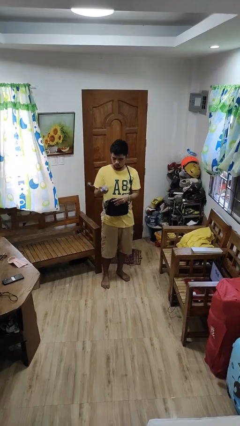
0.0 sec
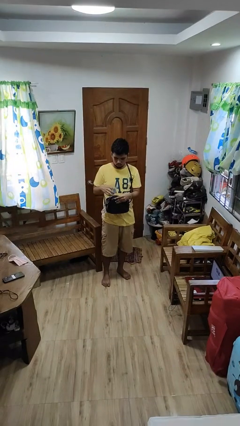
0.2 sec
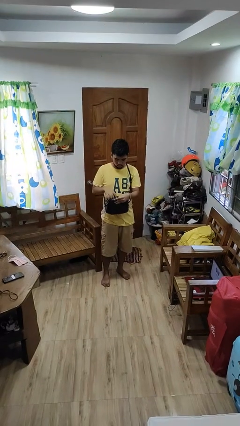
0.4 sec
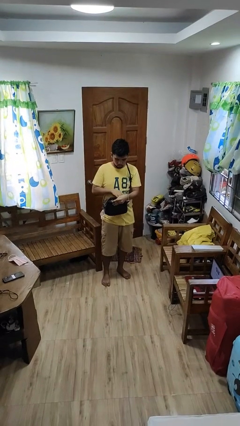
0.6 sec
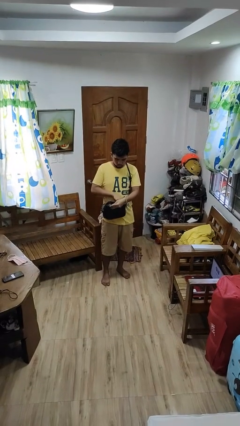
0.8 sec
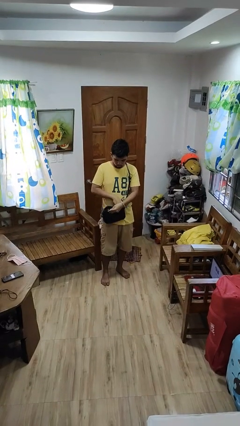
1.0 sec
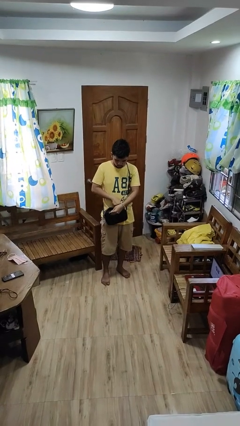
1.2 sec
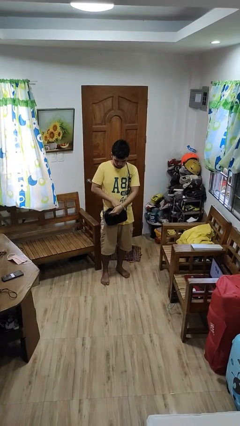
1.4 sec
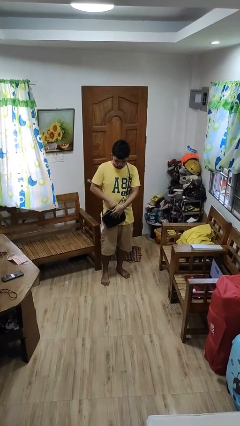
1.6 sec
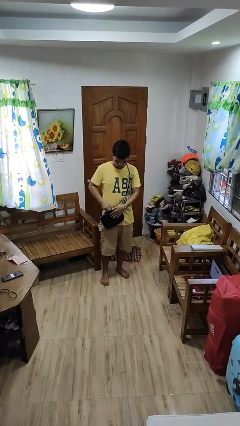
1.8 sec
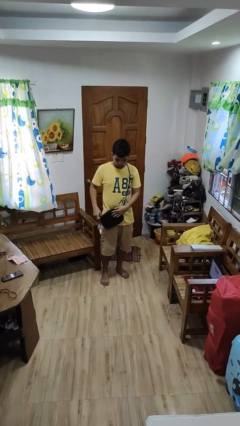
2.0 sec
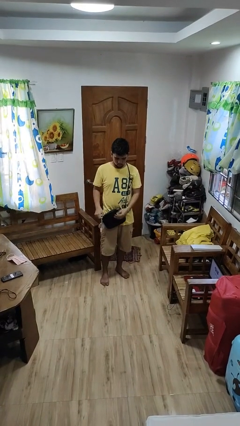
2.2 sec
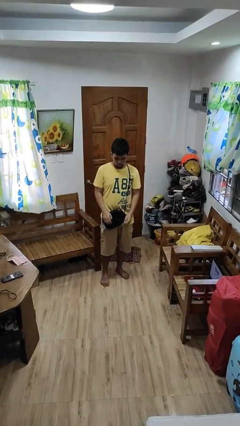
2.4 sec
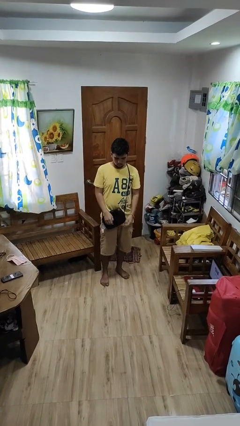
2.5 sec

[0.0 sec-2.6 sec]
person puts object into purse

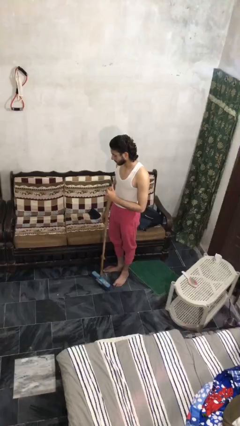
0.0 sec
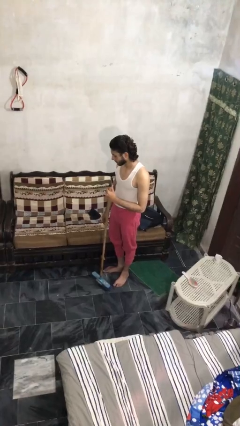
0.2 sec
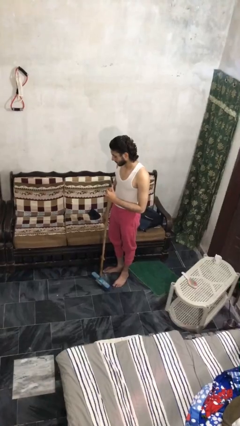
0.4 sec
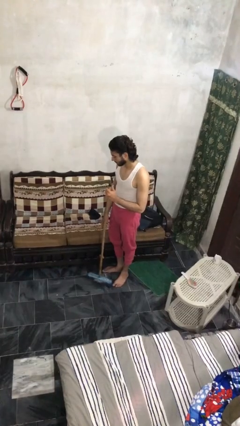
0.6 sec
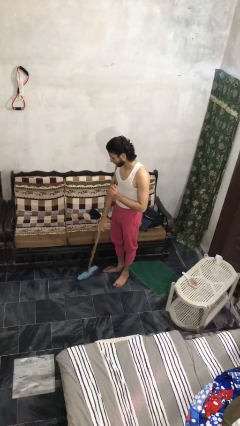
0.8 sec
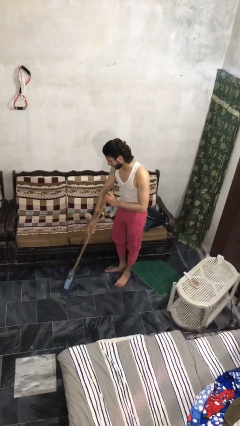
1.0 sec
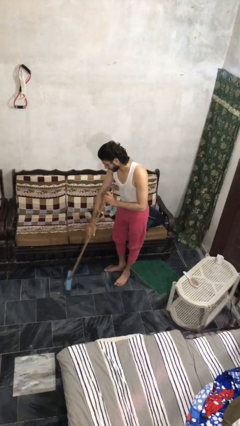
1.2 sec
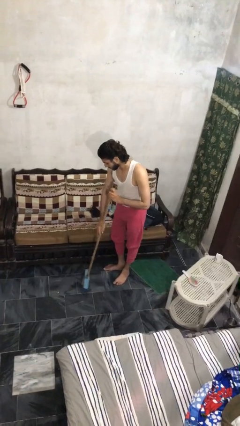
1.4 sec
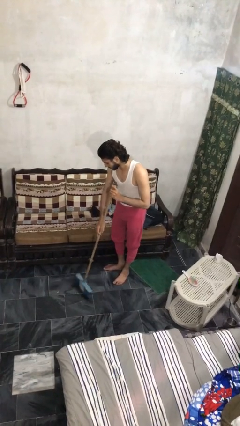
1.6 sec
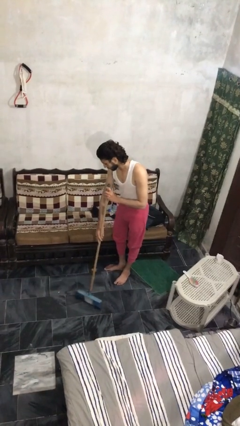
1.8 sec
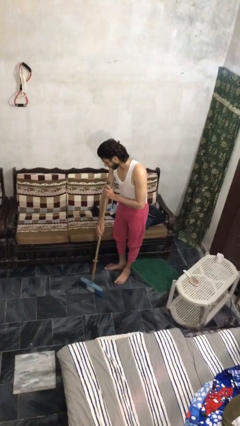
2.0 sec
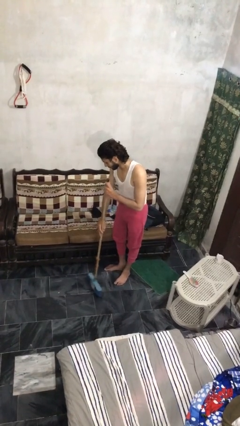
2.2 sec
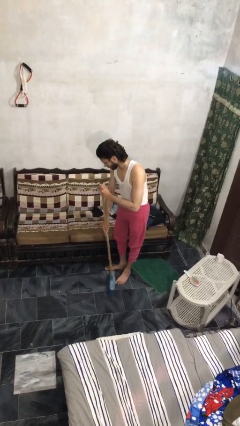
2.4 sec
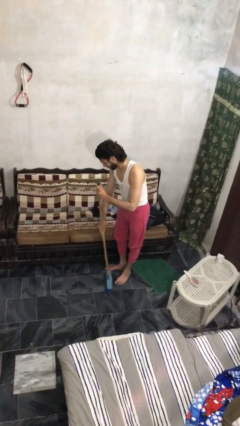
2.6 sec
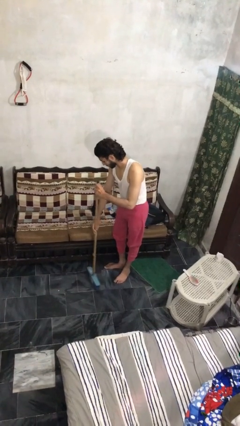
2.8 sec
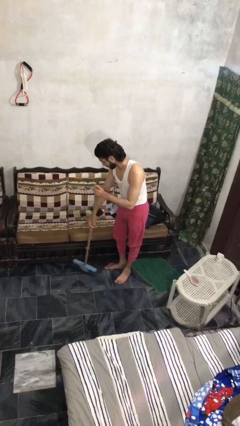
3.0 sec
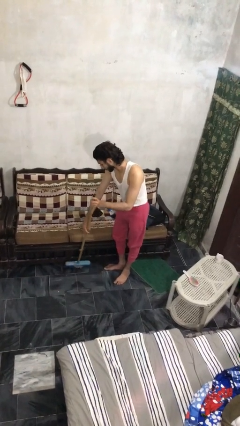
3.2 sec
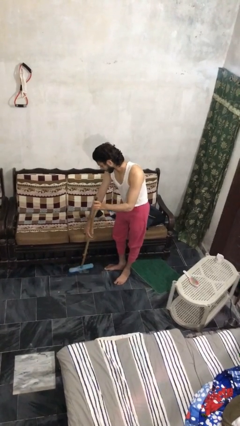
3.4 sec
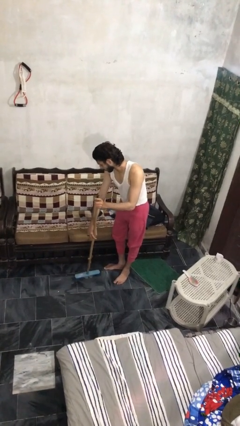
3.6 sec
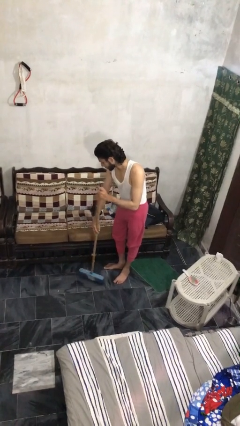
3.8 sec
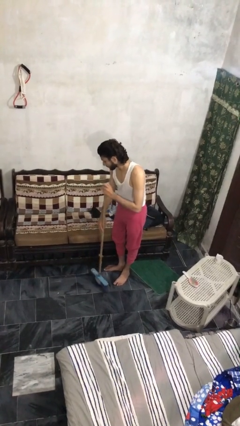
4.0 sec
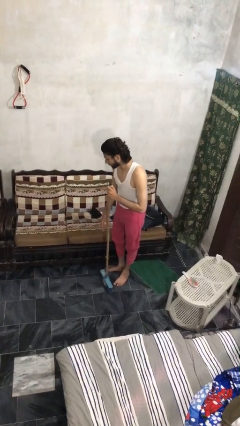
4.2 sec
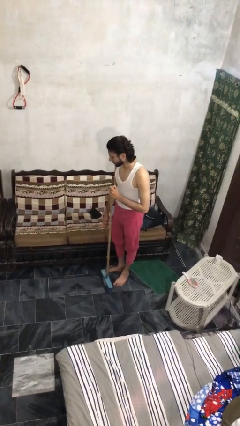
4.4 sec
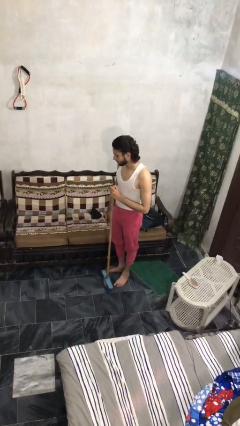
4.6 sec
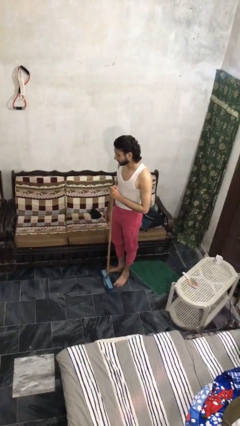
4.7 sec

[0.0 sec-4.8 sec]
person sweeps floor

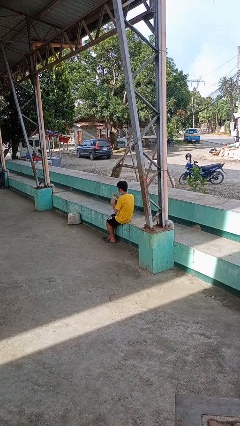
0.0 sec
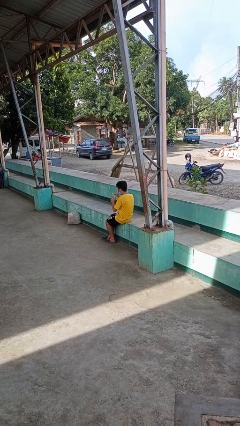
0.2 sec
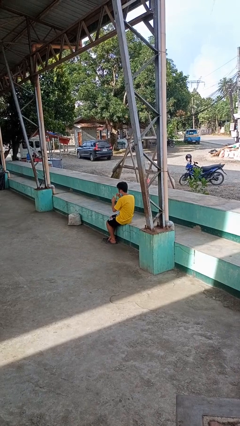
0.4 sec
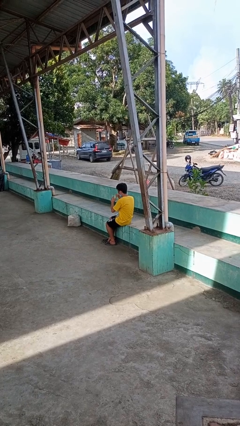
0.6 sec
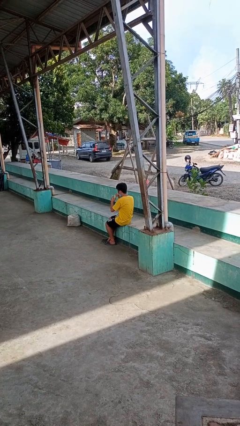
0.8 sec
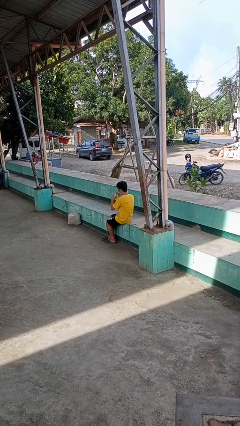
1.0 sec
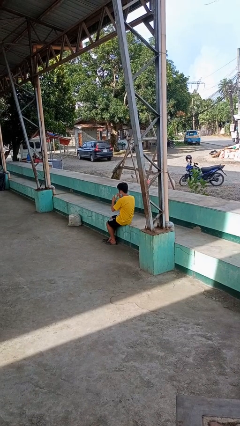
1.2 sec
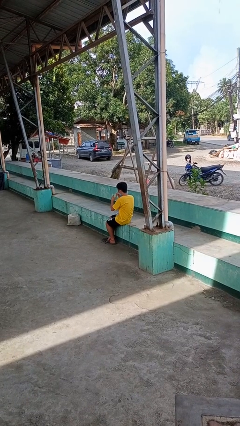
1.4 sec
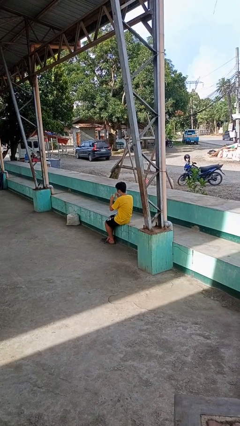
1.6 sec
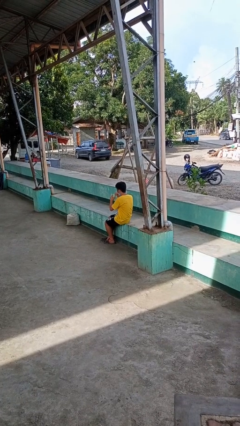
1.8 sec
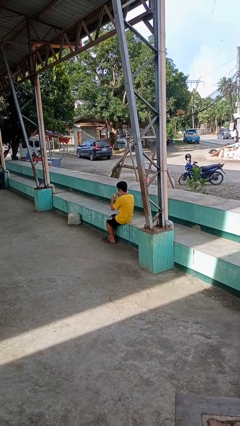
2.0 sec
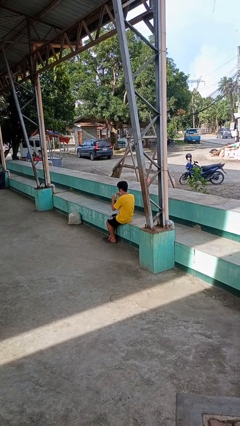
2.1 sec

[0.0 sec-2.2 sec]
person drinks from straw

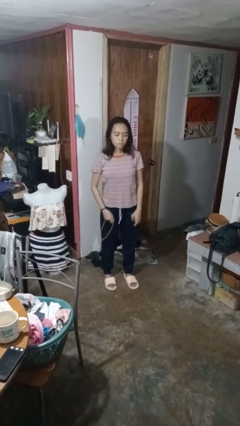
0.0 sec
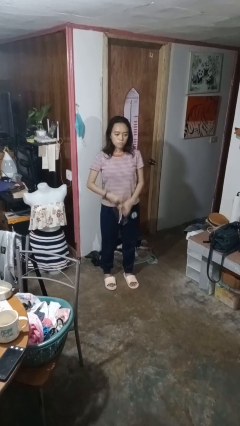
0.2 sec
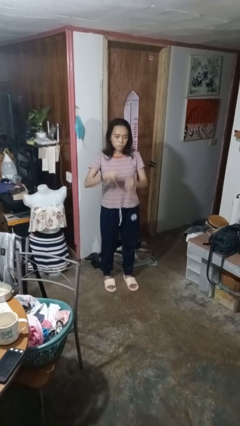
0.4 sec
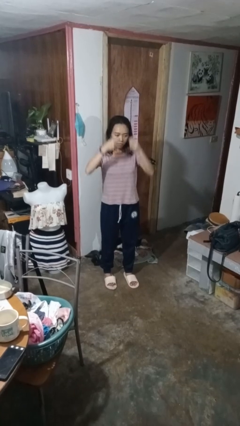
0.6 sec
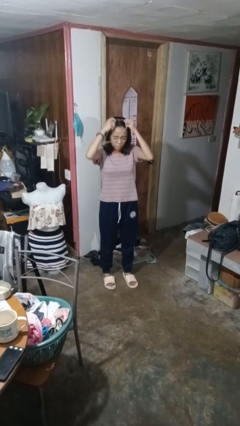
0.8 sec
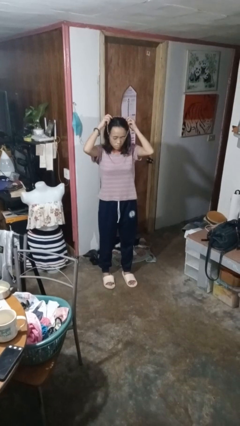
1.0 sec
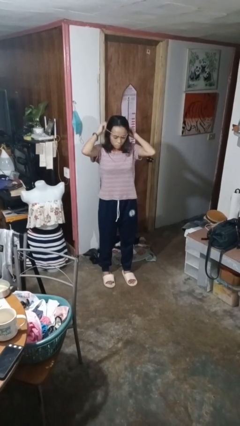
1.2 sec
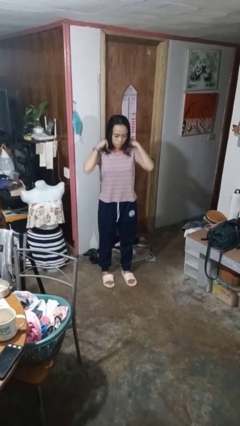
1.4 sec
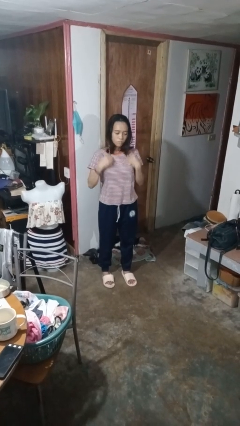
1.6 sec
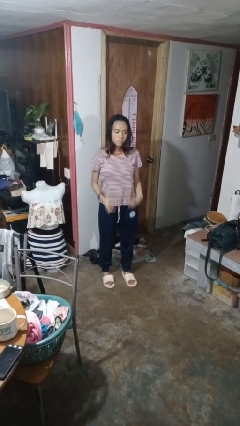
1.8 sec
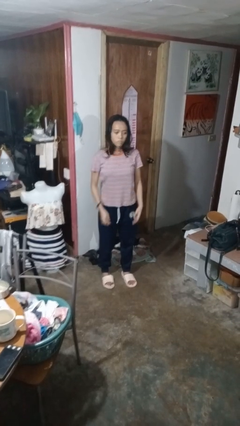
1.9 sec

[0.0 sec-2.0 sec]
person puts on necklace

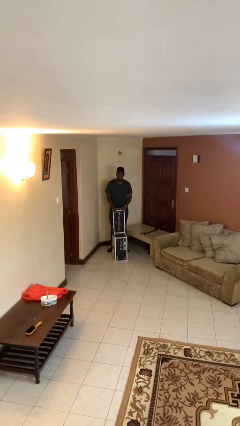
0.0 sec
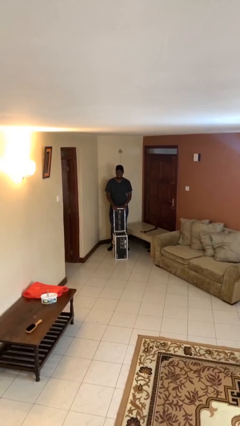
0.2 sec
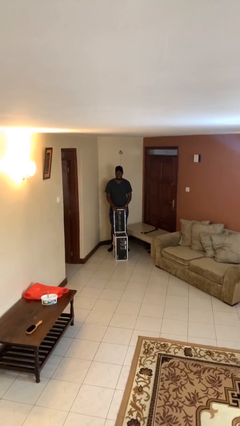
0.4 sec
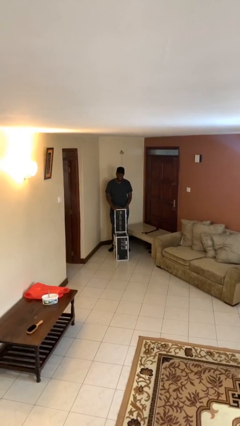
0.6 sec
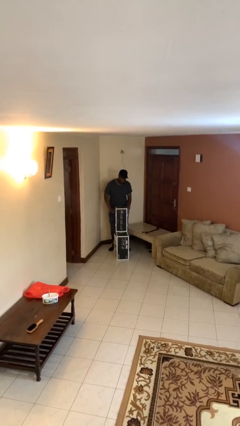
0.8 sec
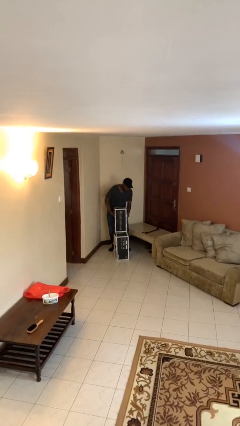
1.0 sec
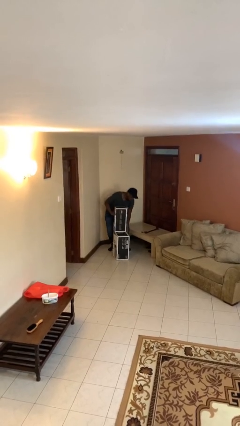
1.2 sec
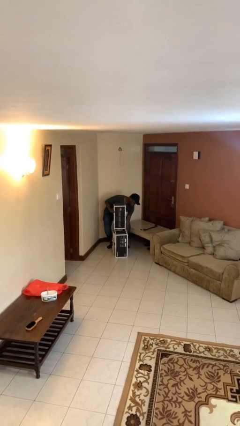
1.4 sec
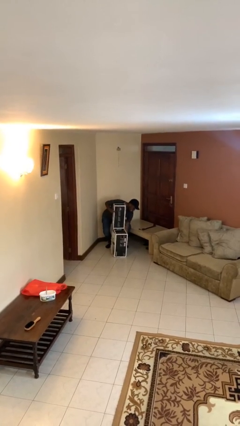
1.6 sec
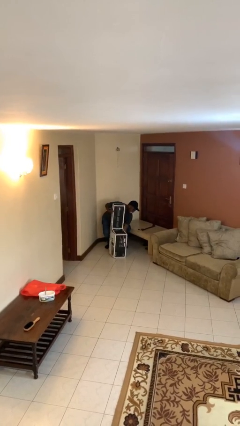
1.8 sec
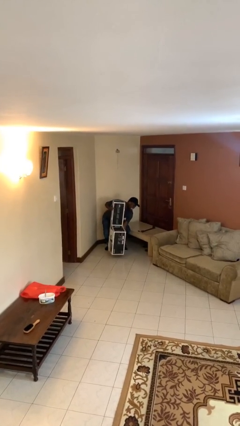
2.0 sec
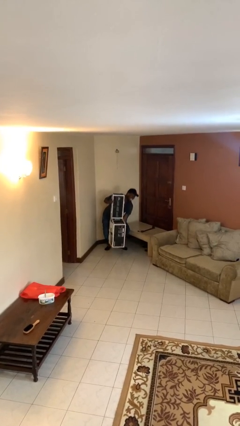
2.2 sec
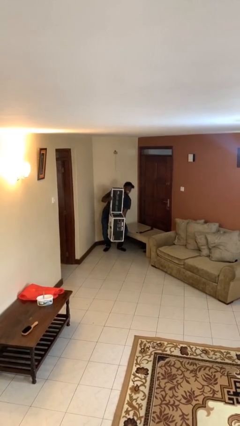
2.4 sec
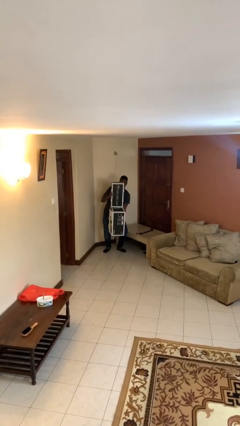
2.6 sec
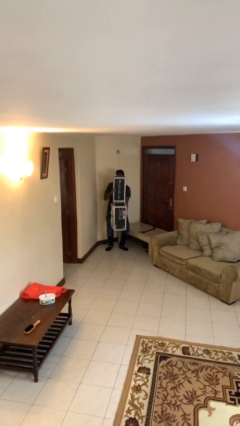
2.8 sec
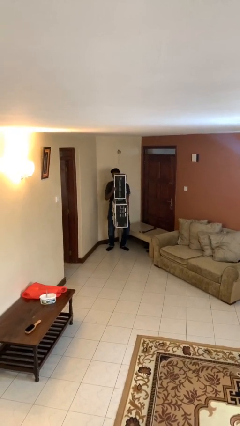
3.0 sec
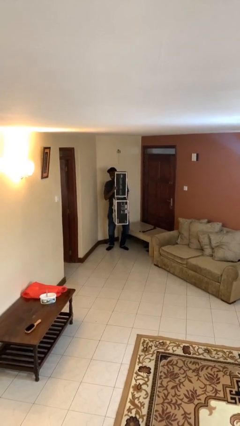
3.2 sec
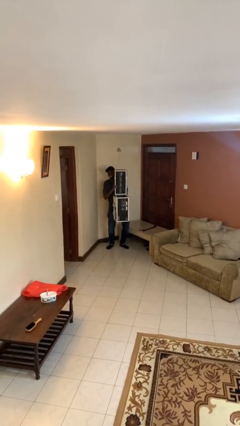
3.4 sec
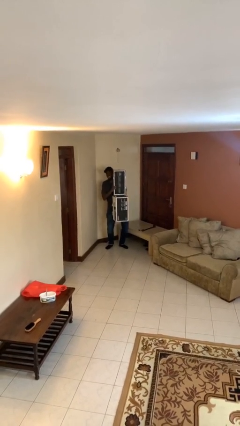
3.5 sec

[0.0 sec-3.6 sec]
person picks up object from floor

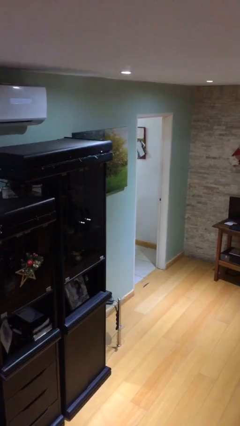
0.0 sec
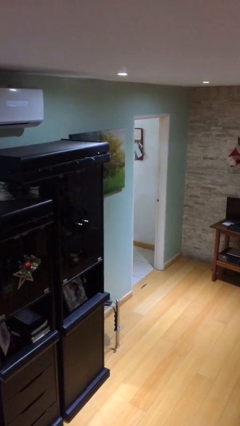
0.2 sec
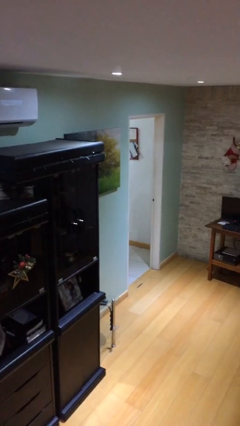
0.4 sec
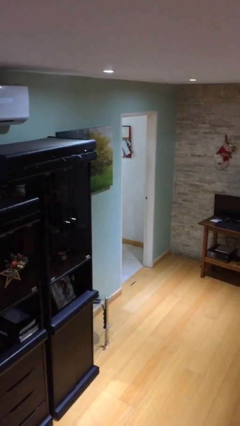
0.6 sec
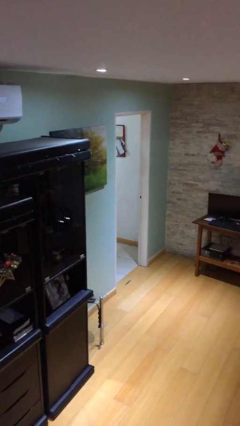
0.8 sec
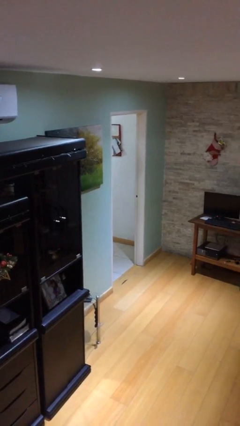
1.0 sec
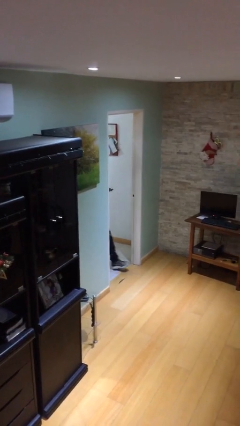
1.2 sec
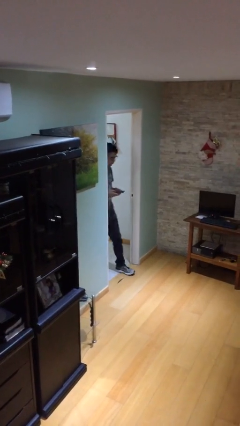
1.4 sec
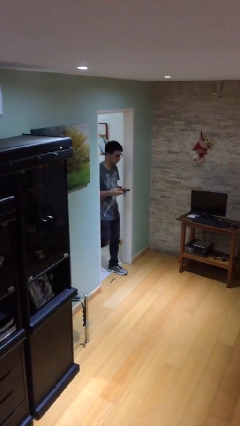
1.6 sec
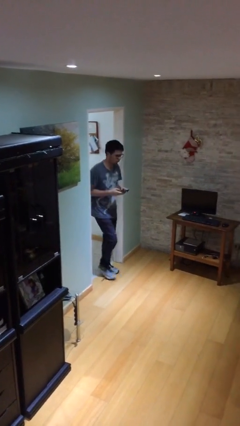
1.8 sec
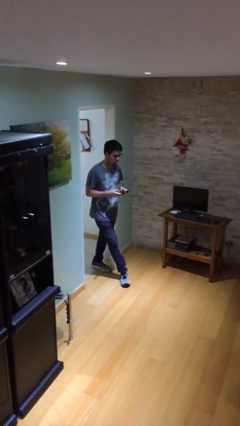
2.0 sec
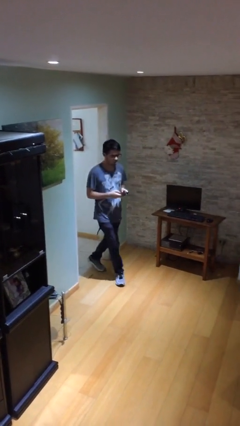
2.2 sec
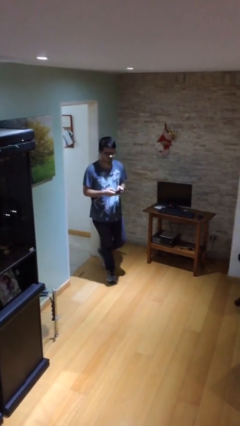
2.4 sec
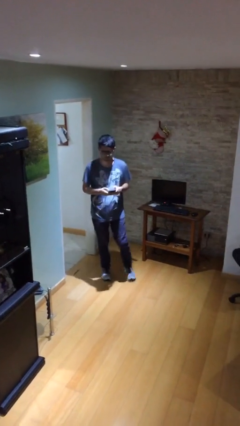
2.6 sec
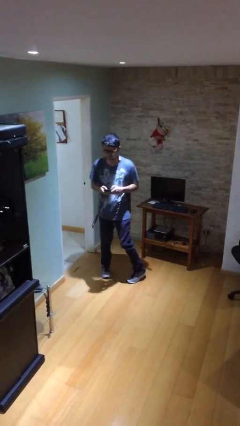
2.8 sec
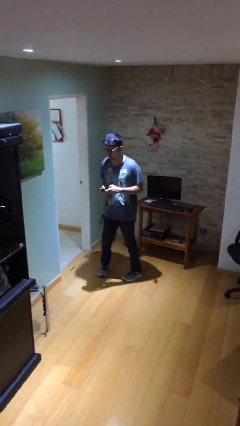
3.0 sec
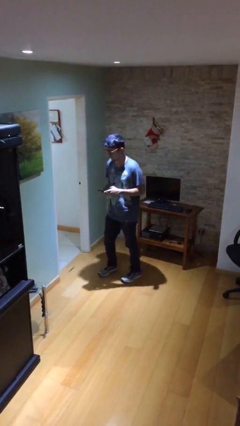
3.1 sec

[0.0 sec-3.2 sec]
person enters scene through structure
